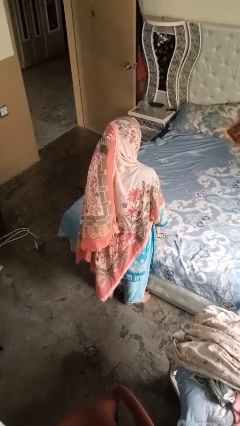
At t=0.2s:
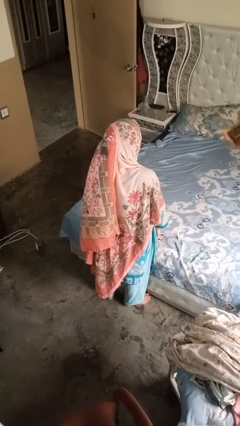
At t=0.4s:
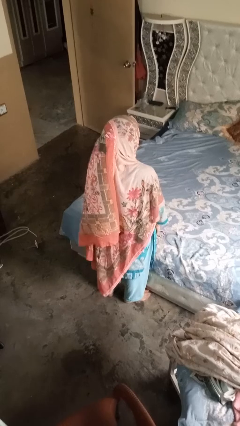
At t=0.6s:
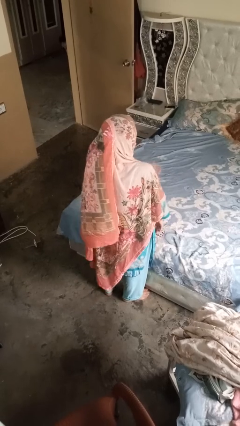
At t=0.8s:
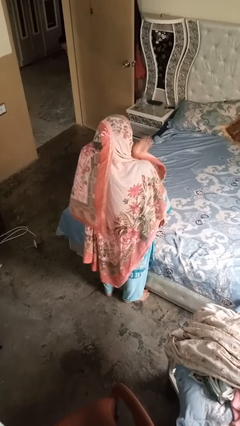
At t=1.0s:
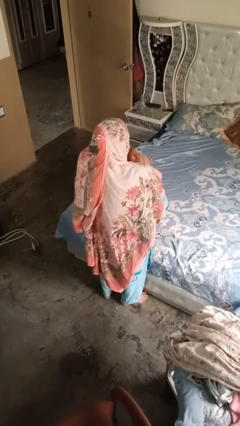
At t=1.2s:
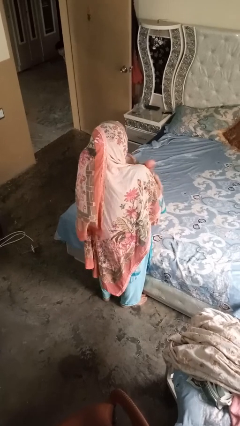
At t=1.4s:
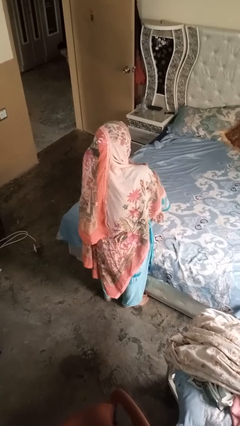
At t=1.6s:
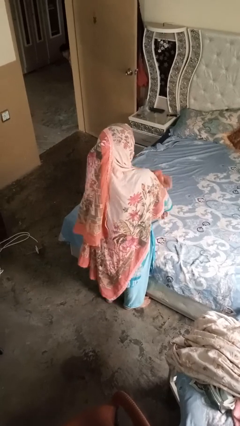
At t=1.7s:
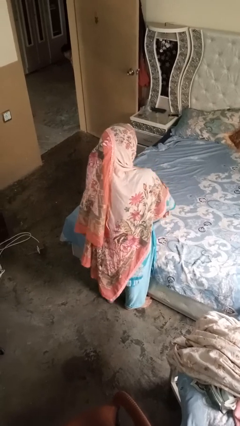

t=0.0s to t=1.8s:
person swats bug

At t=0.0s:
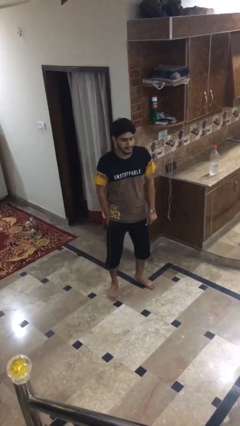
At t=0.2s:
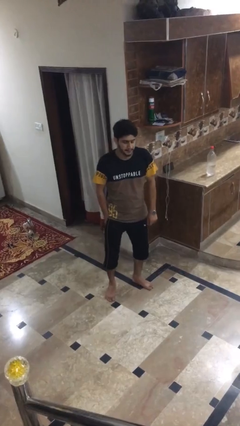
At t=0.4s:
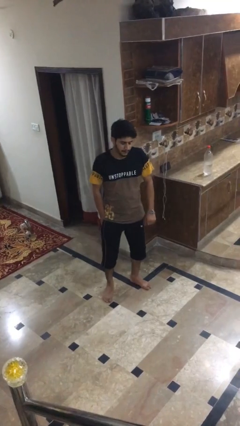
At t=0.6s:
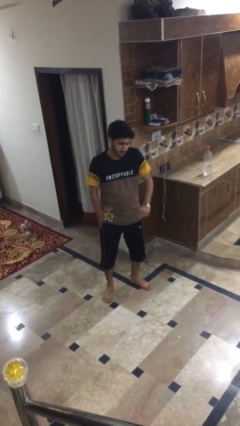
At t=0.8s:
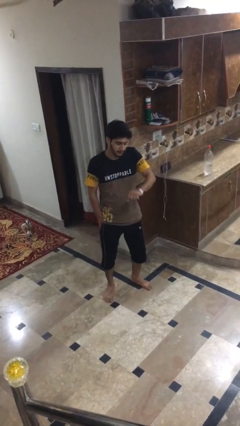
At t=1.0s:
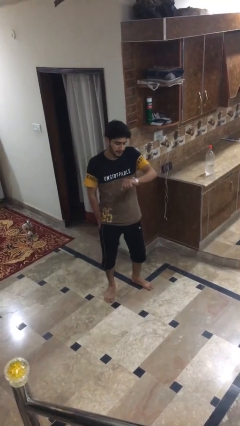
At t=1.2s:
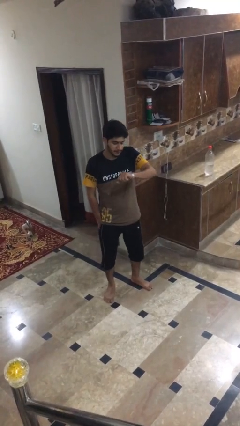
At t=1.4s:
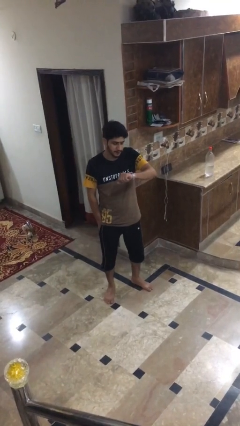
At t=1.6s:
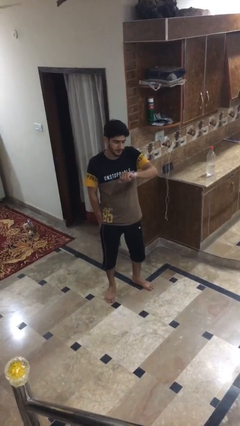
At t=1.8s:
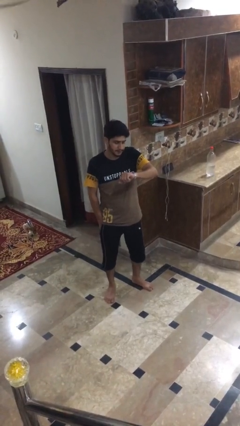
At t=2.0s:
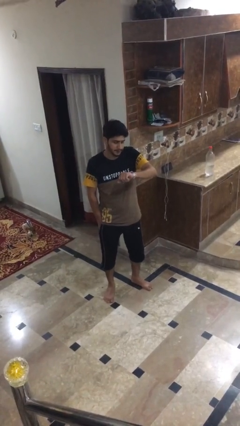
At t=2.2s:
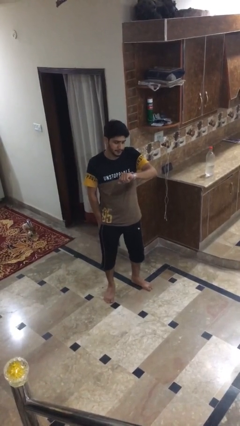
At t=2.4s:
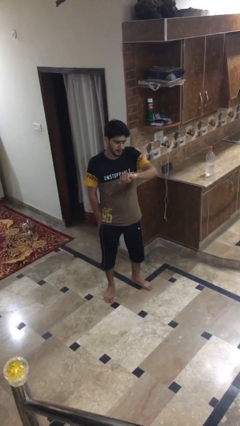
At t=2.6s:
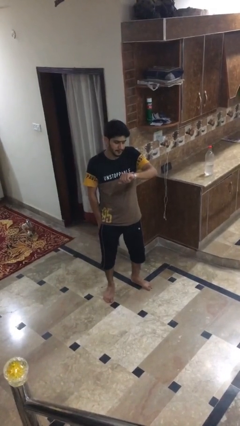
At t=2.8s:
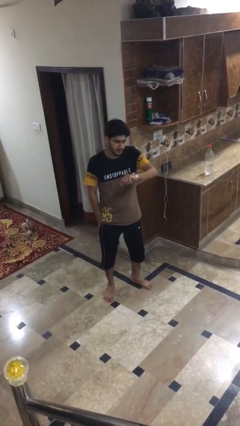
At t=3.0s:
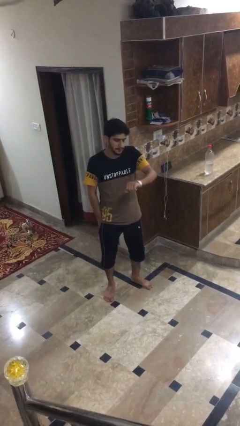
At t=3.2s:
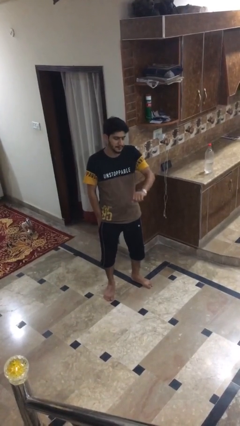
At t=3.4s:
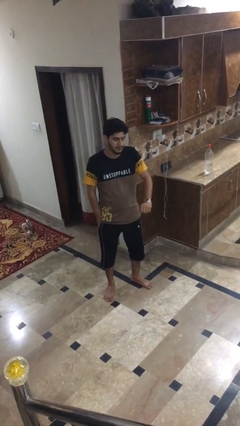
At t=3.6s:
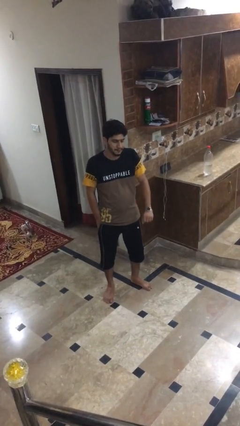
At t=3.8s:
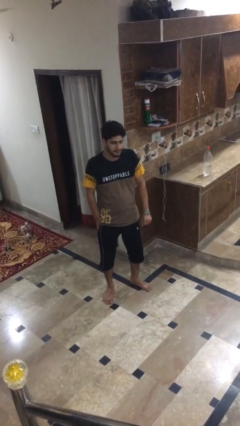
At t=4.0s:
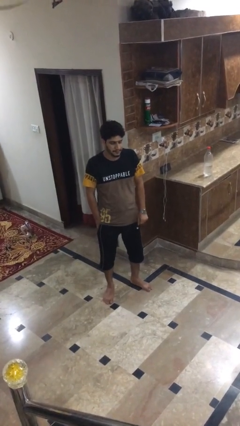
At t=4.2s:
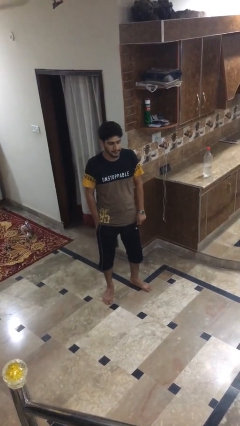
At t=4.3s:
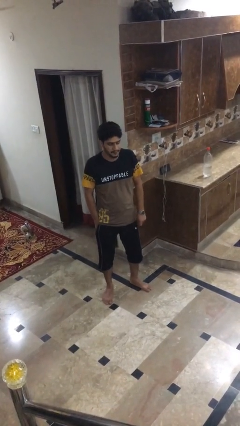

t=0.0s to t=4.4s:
person looks at wristwatch

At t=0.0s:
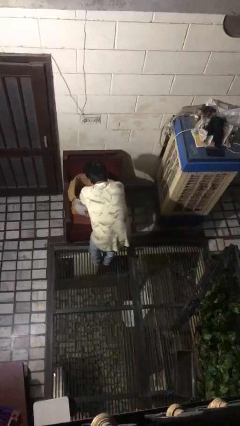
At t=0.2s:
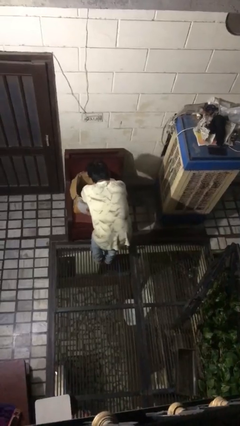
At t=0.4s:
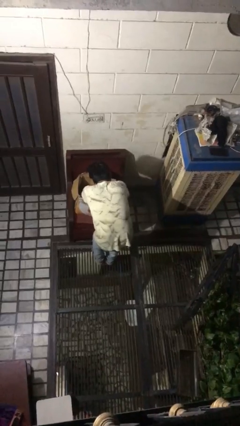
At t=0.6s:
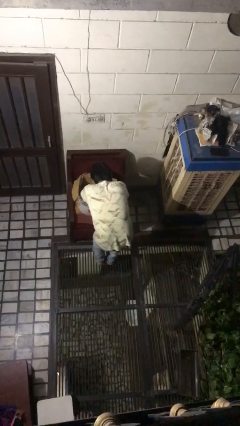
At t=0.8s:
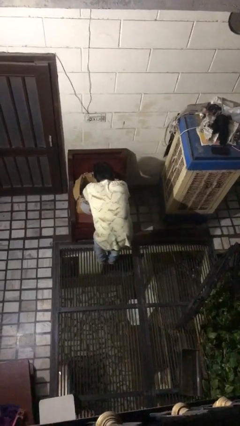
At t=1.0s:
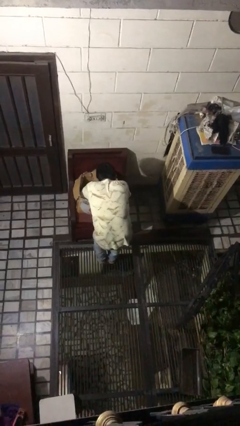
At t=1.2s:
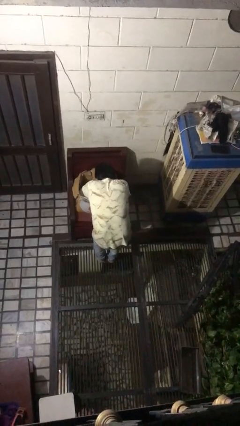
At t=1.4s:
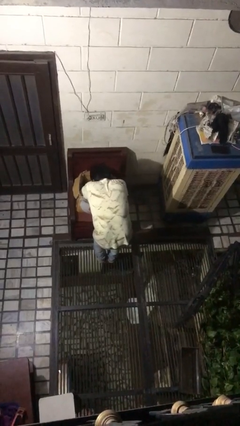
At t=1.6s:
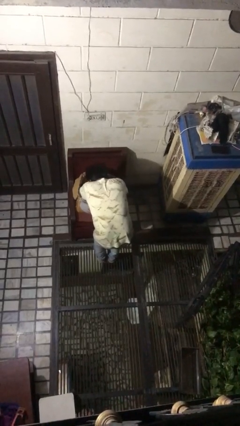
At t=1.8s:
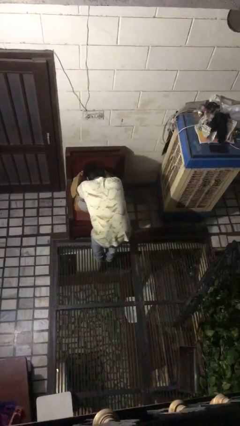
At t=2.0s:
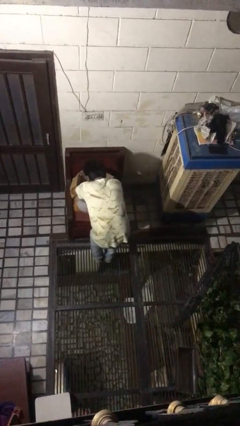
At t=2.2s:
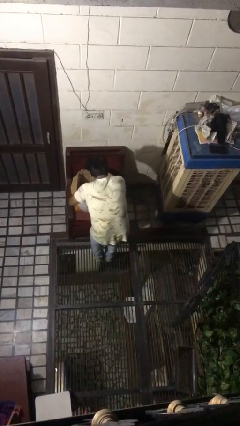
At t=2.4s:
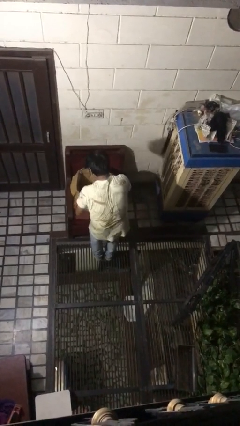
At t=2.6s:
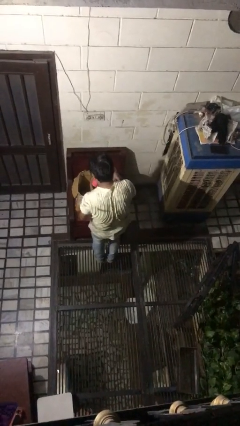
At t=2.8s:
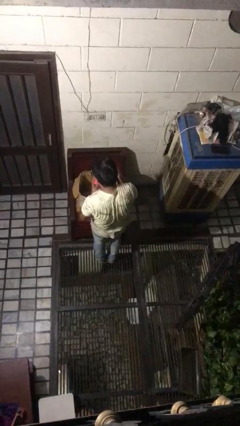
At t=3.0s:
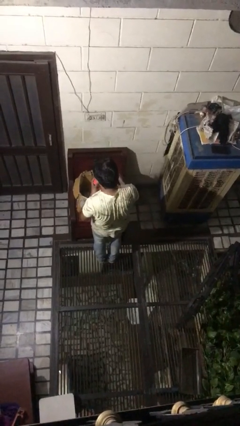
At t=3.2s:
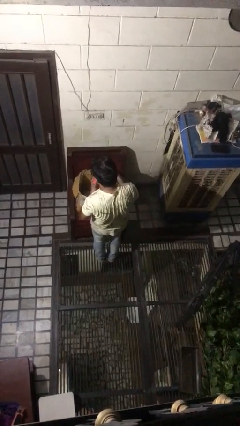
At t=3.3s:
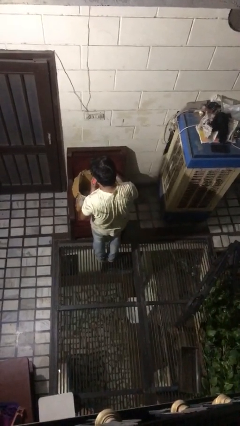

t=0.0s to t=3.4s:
person searches in box

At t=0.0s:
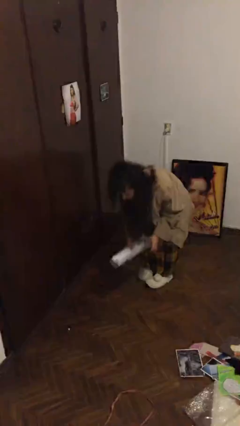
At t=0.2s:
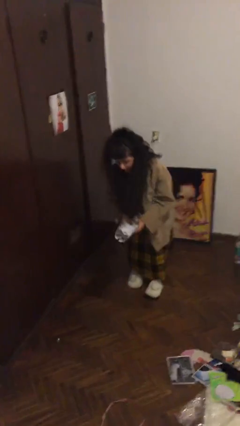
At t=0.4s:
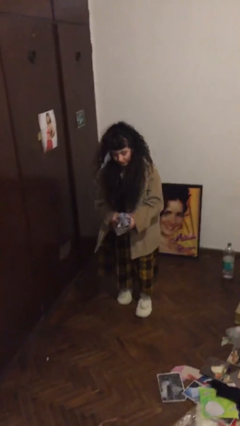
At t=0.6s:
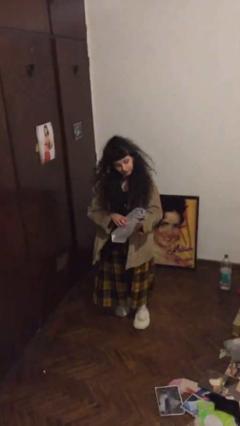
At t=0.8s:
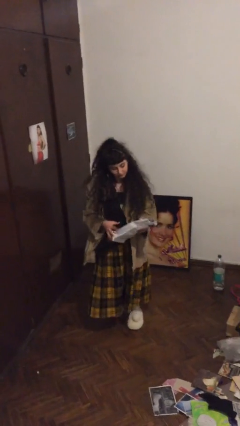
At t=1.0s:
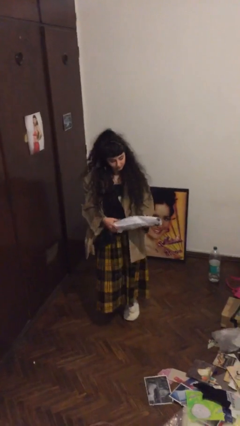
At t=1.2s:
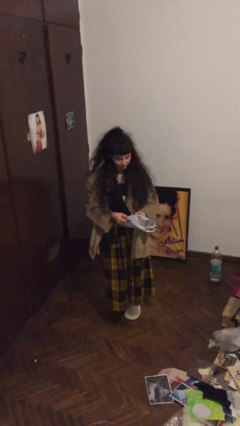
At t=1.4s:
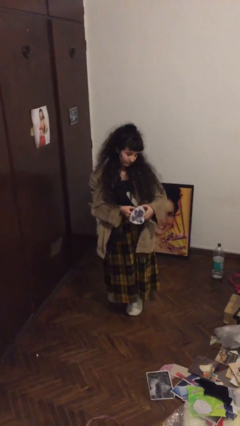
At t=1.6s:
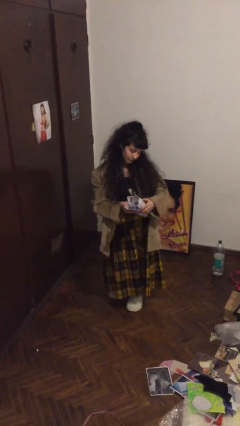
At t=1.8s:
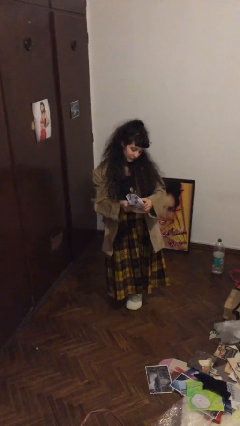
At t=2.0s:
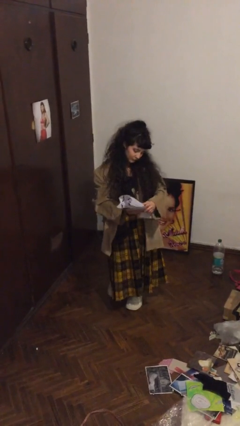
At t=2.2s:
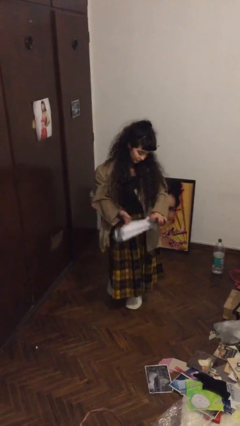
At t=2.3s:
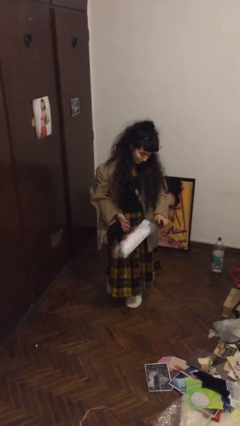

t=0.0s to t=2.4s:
person picks up object from floor

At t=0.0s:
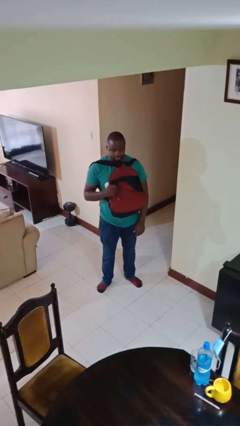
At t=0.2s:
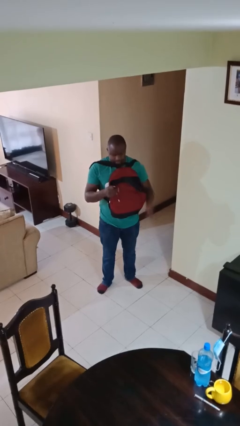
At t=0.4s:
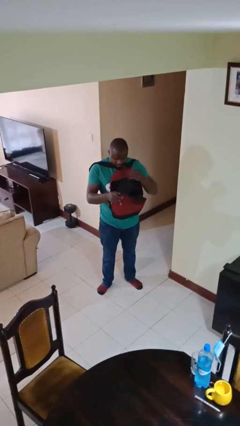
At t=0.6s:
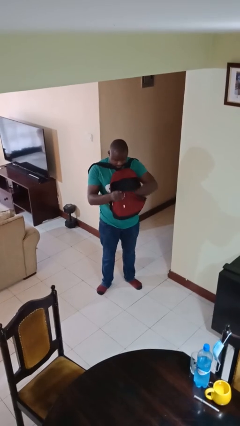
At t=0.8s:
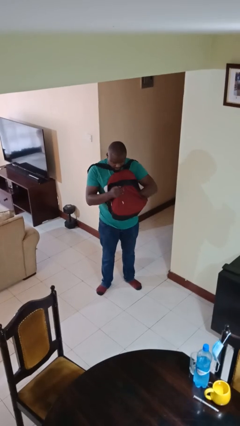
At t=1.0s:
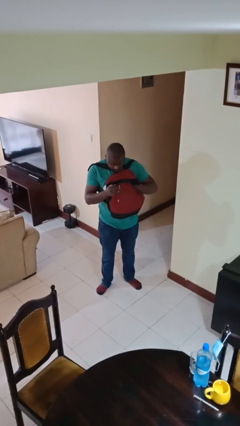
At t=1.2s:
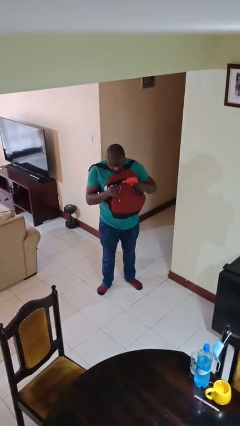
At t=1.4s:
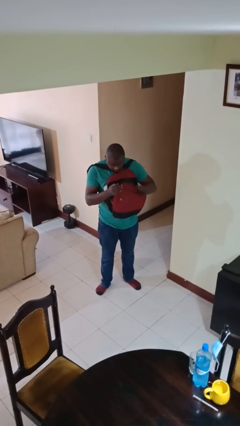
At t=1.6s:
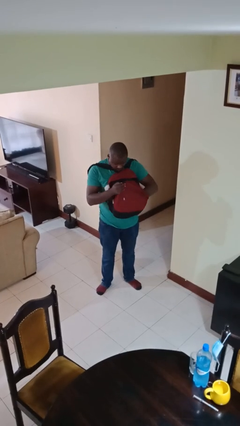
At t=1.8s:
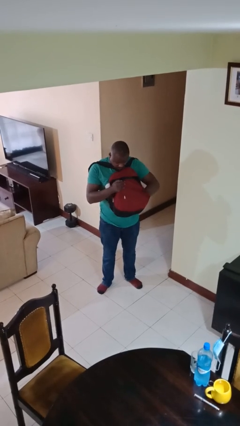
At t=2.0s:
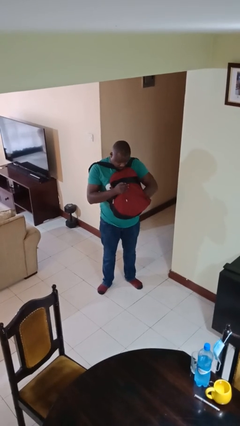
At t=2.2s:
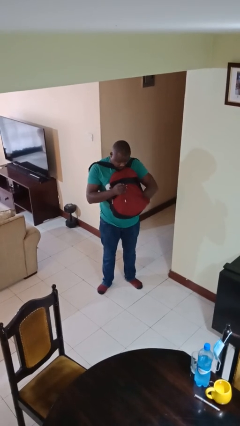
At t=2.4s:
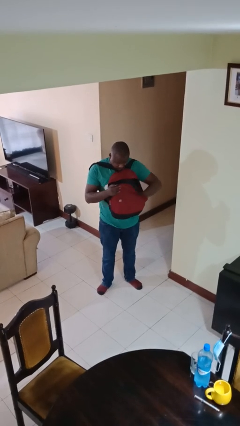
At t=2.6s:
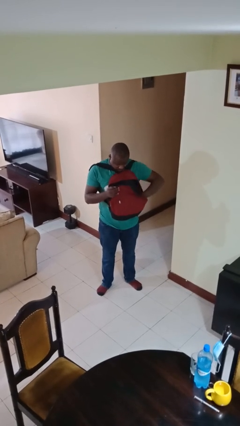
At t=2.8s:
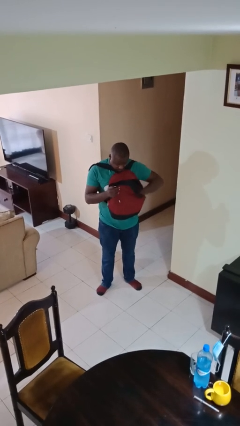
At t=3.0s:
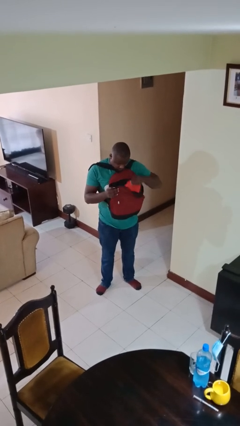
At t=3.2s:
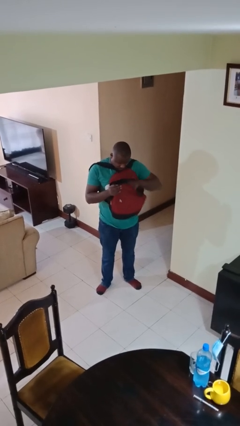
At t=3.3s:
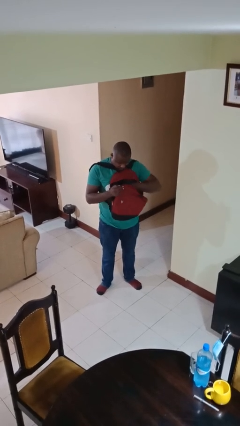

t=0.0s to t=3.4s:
person searches in backpack

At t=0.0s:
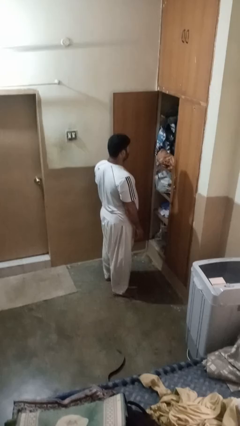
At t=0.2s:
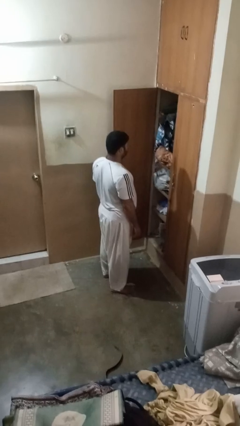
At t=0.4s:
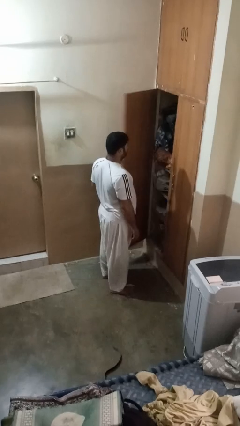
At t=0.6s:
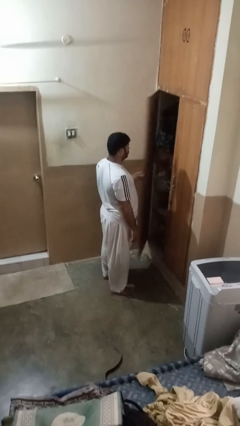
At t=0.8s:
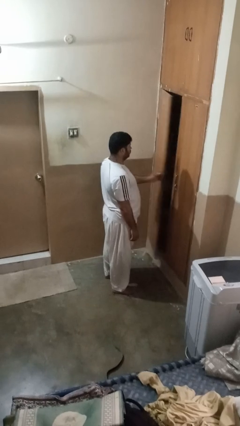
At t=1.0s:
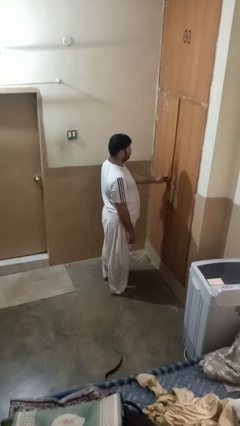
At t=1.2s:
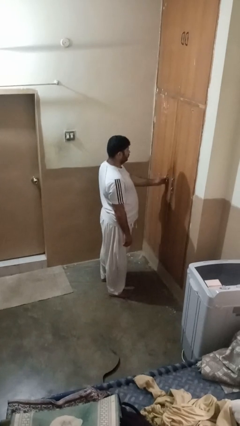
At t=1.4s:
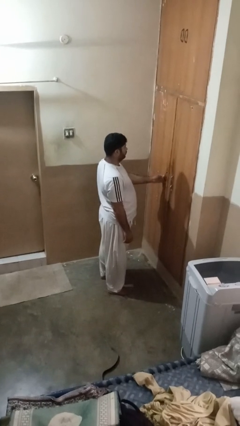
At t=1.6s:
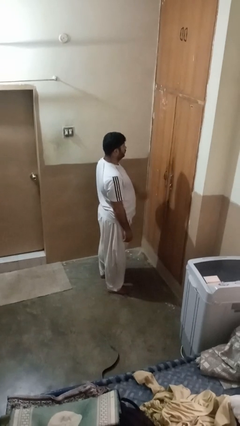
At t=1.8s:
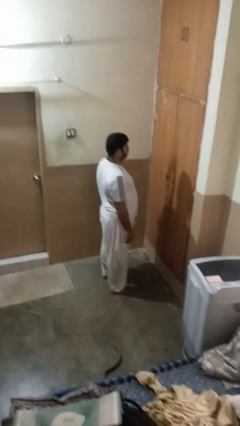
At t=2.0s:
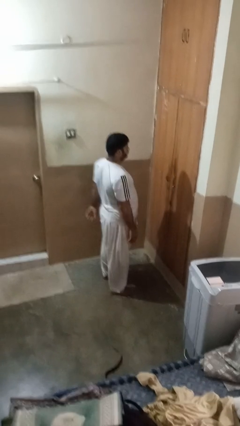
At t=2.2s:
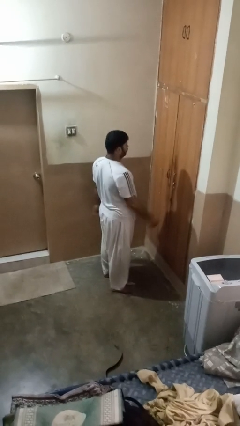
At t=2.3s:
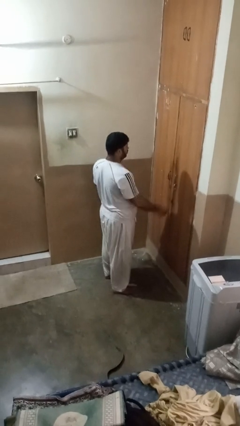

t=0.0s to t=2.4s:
person closes closet door
